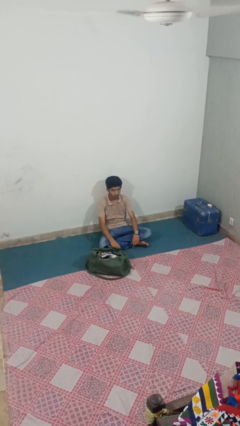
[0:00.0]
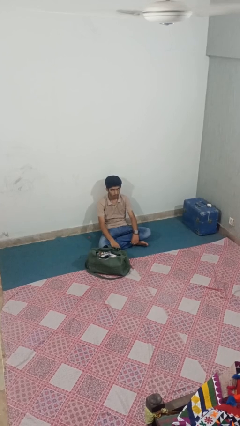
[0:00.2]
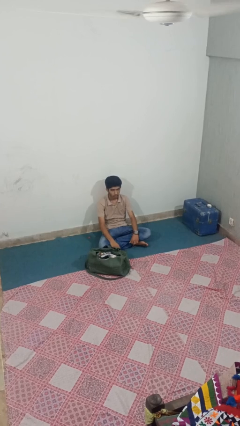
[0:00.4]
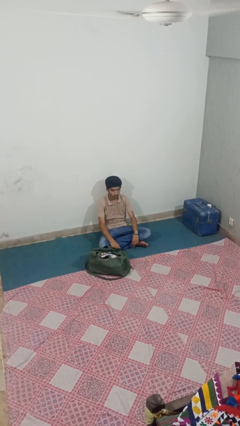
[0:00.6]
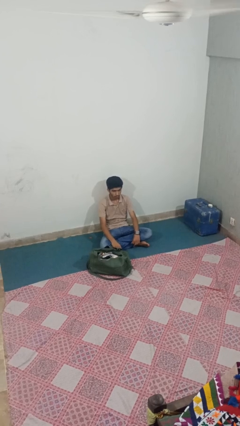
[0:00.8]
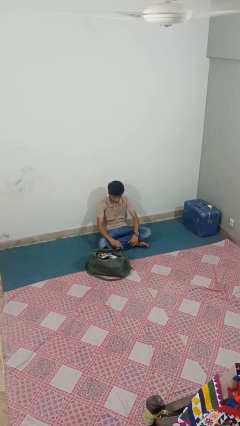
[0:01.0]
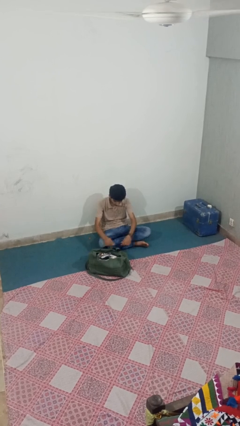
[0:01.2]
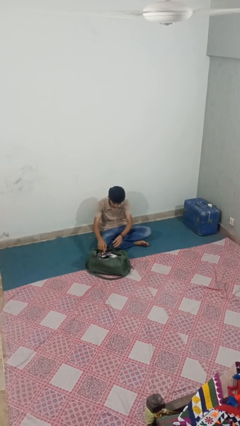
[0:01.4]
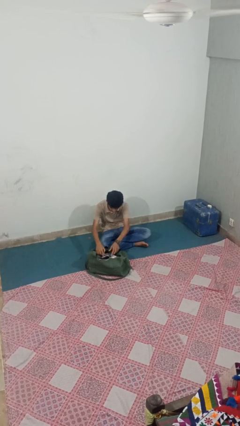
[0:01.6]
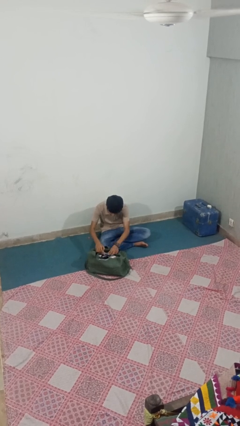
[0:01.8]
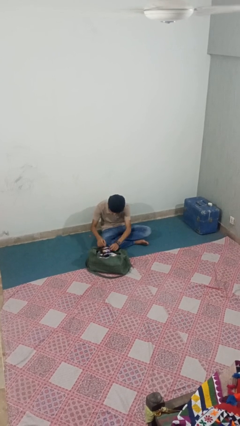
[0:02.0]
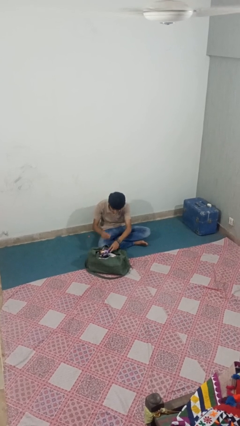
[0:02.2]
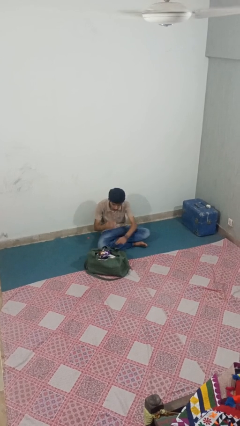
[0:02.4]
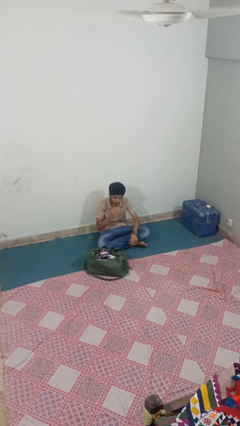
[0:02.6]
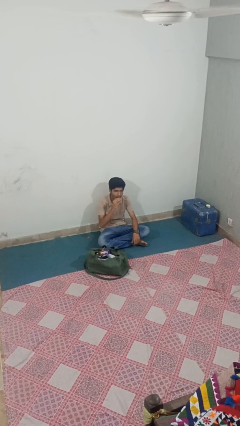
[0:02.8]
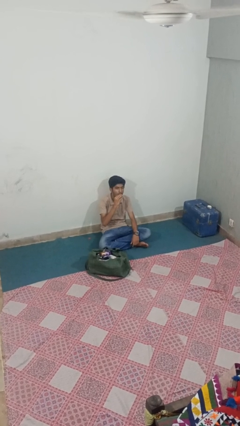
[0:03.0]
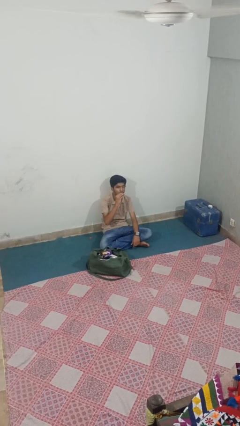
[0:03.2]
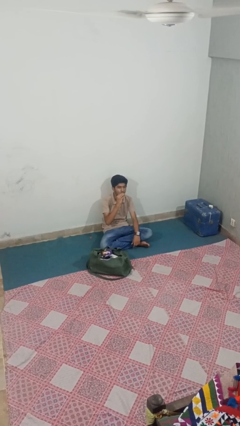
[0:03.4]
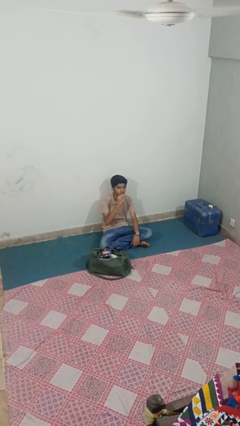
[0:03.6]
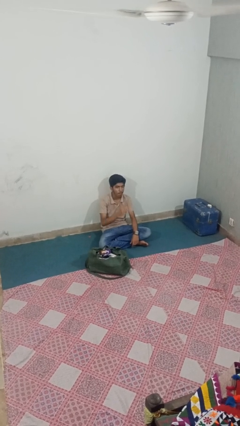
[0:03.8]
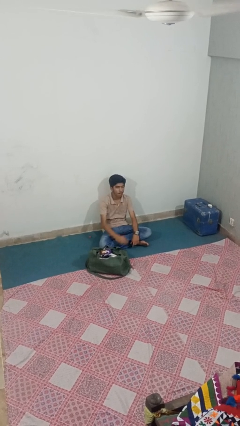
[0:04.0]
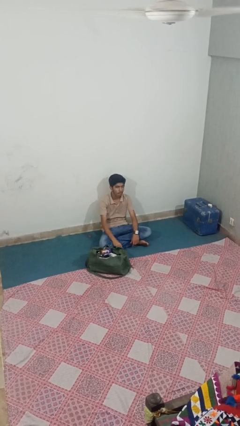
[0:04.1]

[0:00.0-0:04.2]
person eats snack from bag

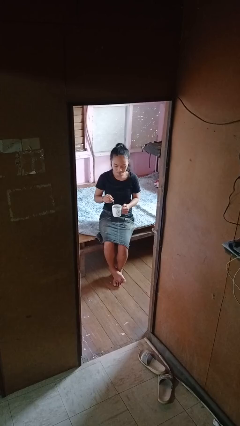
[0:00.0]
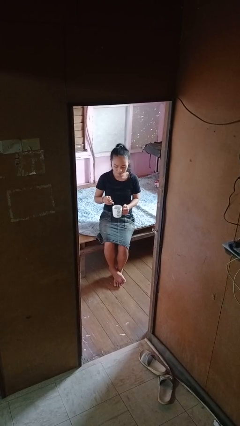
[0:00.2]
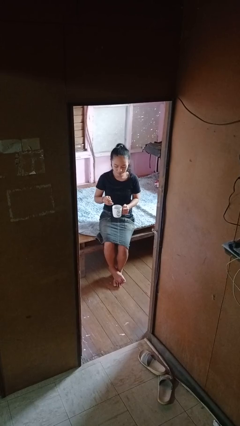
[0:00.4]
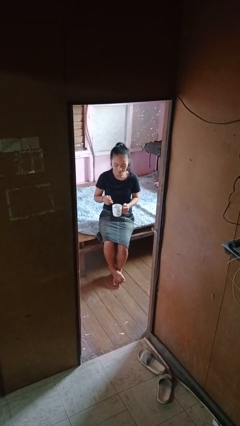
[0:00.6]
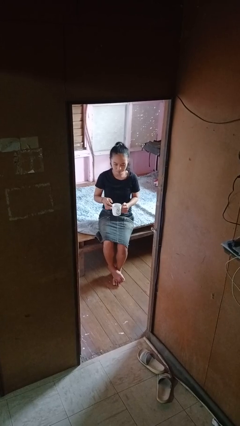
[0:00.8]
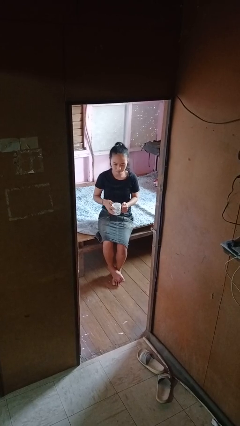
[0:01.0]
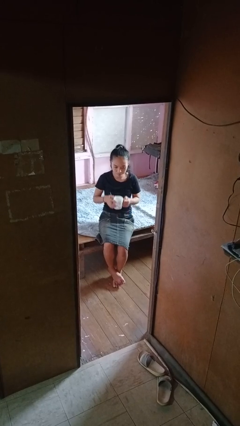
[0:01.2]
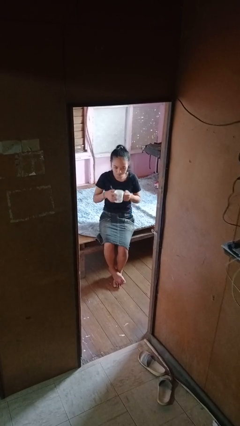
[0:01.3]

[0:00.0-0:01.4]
person stirs mug

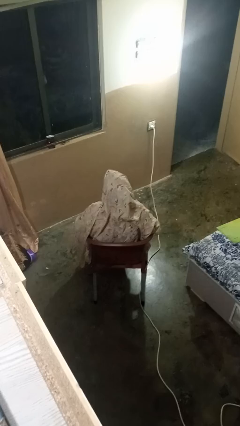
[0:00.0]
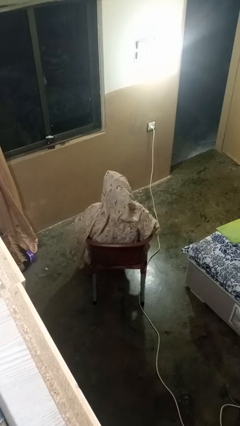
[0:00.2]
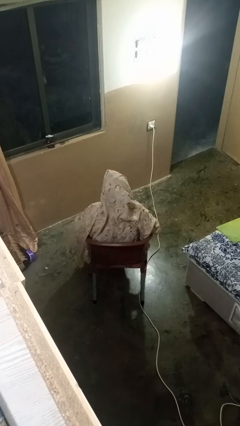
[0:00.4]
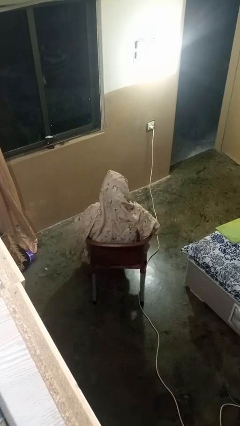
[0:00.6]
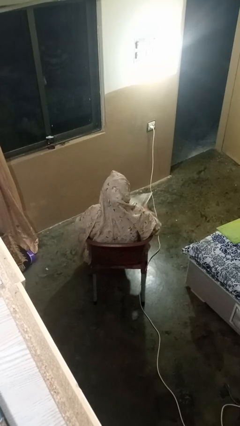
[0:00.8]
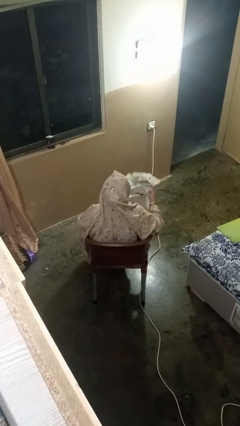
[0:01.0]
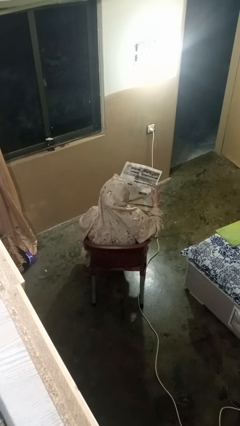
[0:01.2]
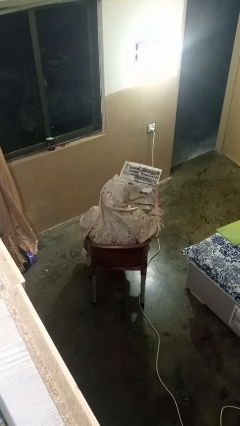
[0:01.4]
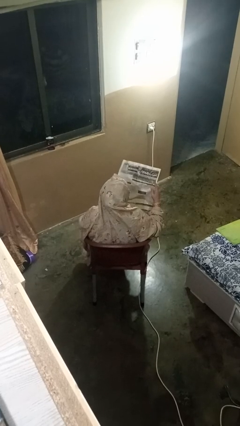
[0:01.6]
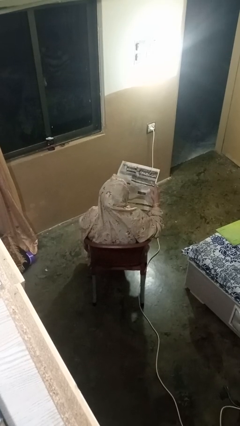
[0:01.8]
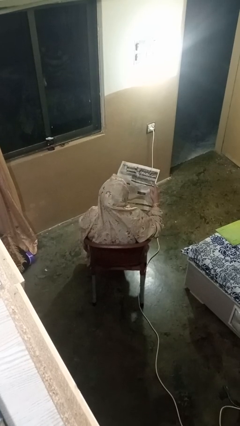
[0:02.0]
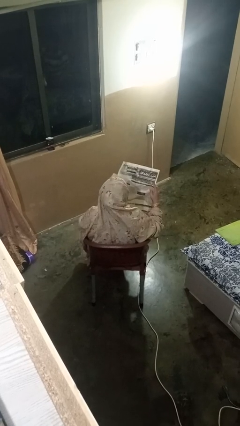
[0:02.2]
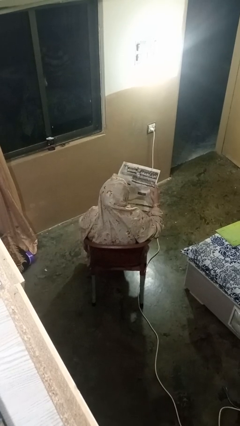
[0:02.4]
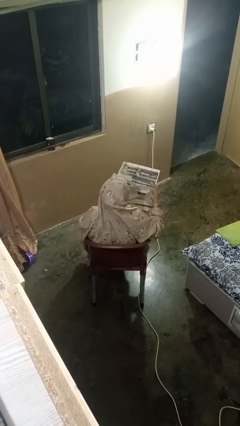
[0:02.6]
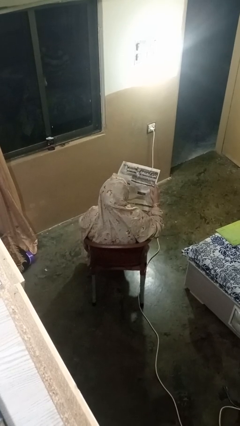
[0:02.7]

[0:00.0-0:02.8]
person reads newspaper

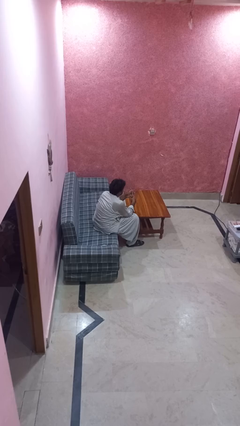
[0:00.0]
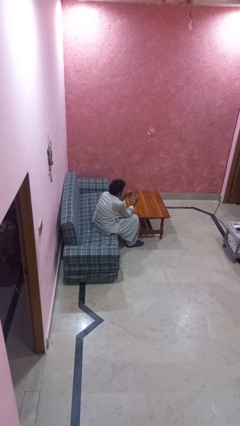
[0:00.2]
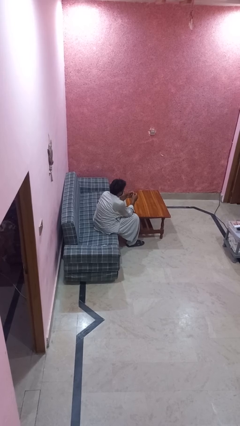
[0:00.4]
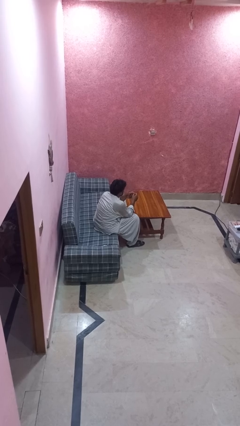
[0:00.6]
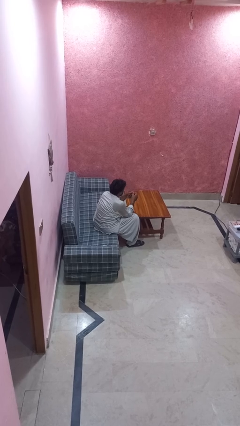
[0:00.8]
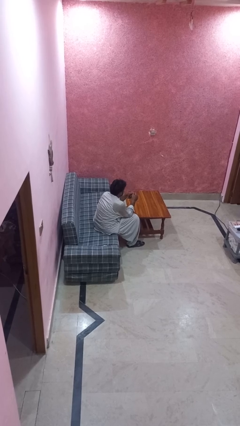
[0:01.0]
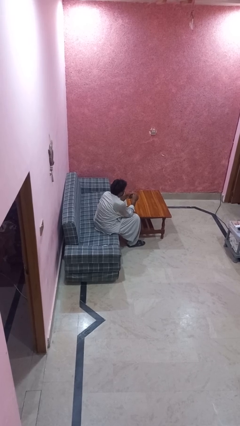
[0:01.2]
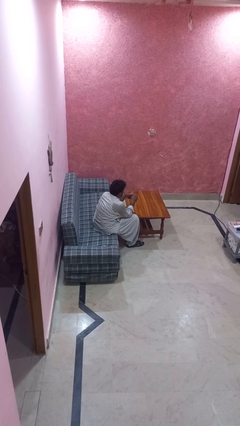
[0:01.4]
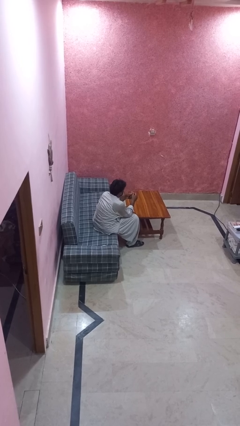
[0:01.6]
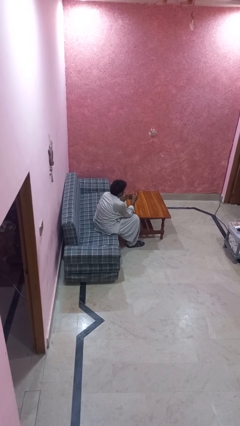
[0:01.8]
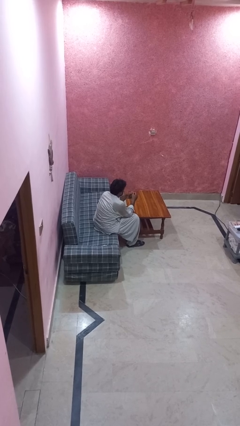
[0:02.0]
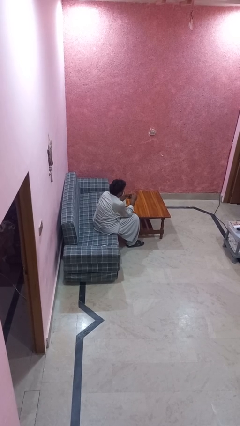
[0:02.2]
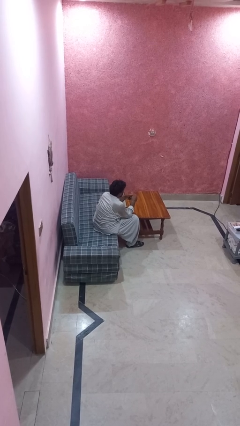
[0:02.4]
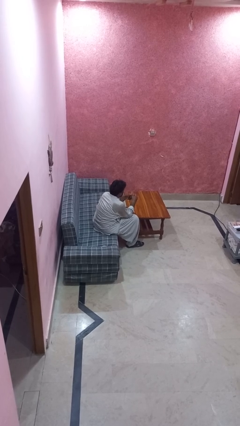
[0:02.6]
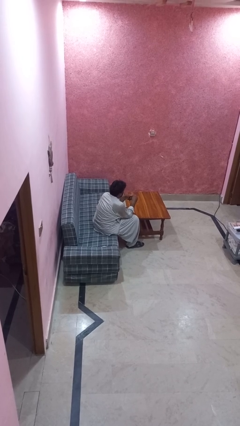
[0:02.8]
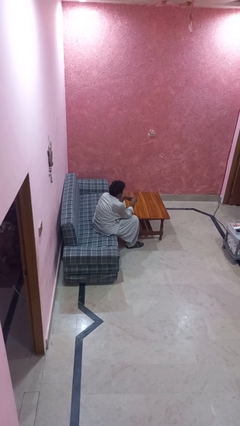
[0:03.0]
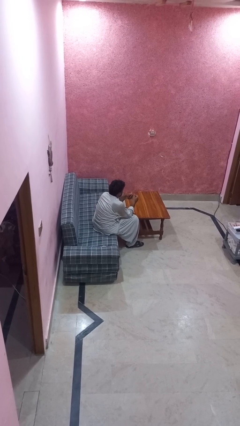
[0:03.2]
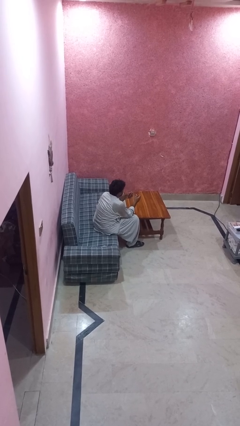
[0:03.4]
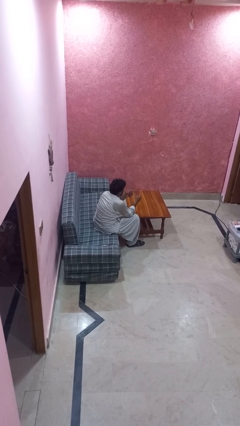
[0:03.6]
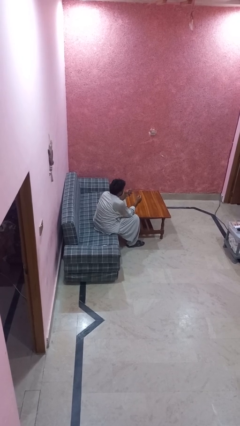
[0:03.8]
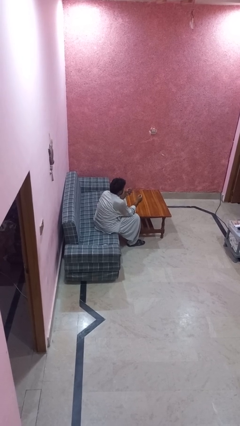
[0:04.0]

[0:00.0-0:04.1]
person files fingernails

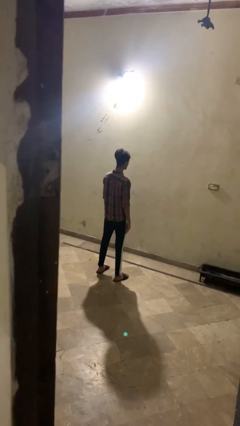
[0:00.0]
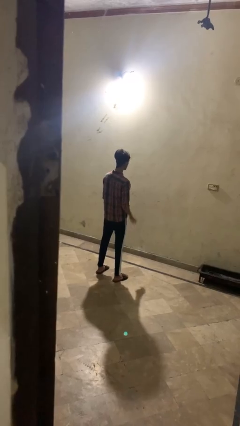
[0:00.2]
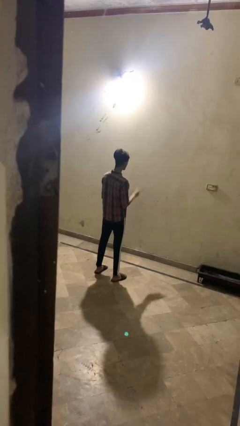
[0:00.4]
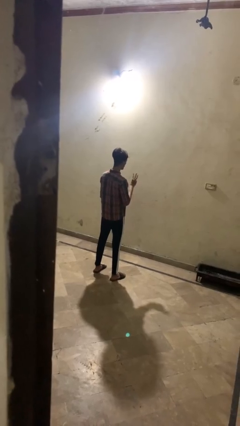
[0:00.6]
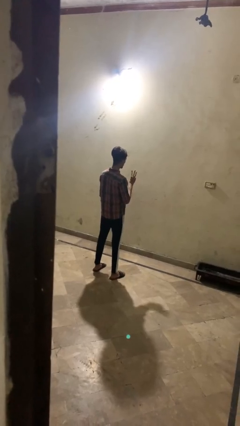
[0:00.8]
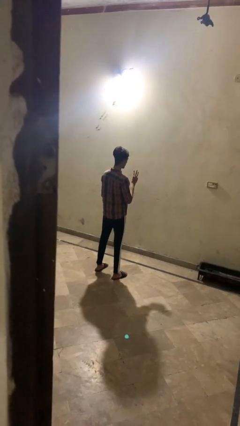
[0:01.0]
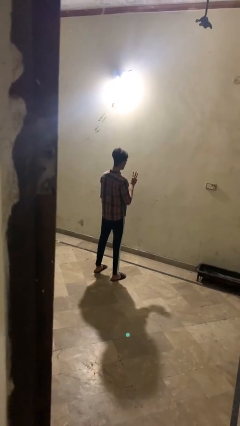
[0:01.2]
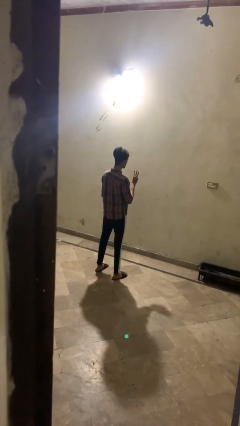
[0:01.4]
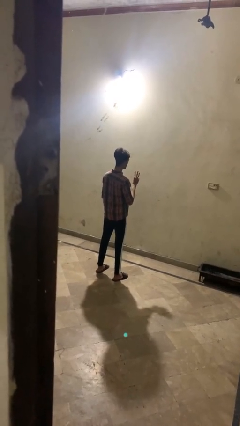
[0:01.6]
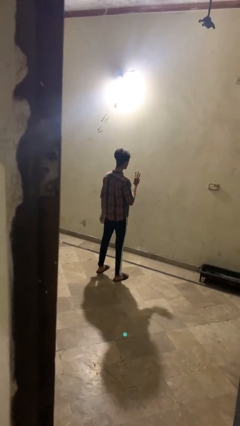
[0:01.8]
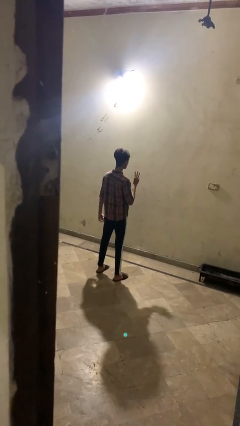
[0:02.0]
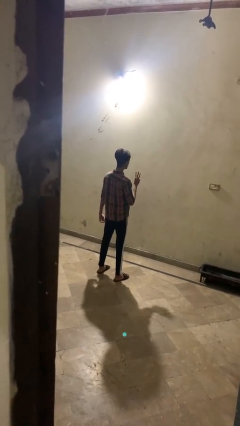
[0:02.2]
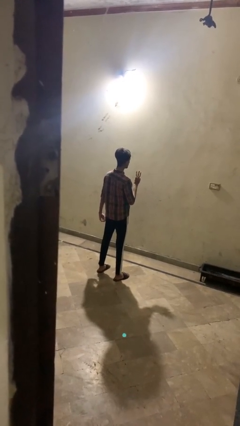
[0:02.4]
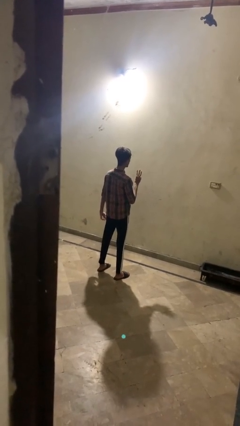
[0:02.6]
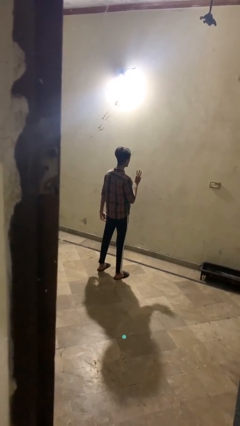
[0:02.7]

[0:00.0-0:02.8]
person gestures number three

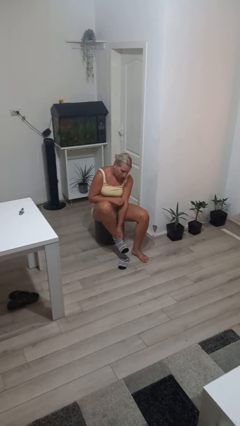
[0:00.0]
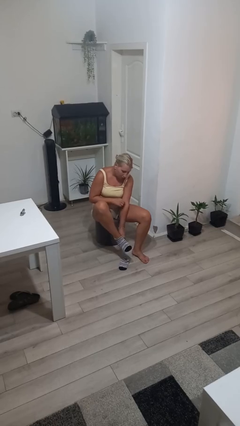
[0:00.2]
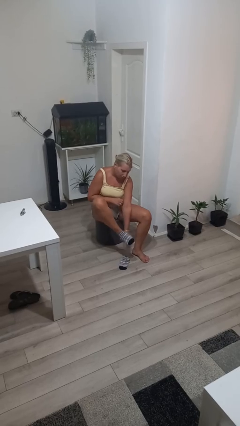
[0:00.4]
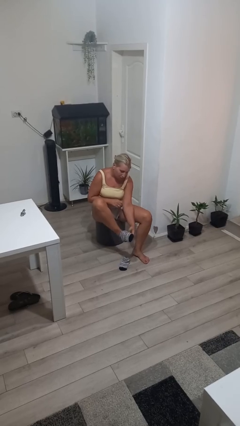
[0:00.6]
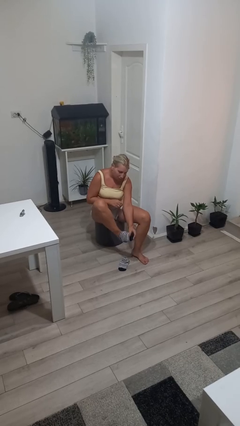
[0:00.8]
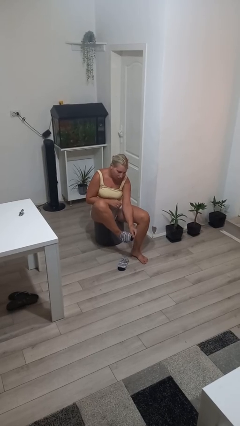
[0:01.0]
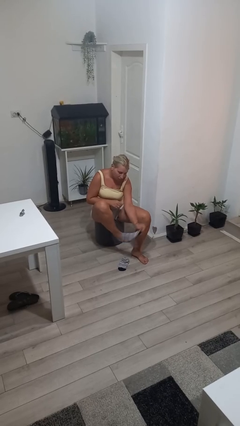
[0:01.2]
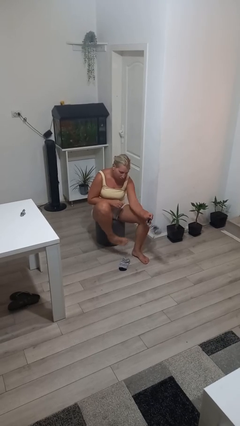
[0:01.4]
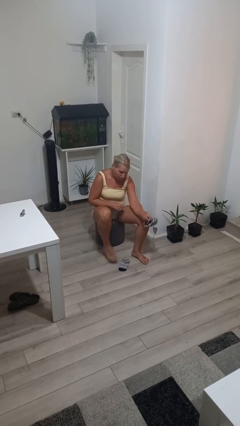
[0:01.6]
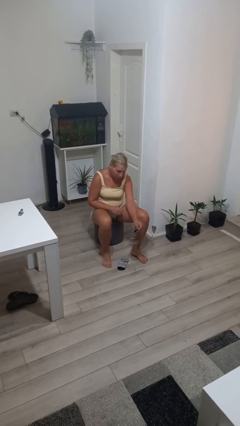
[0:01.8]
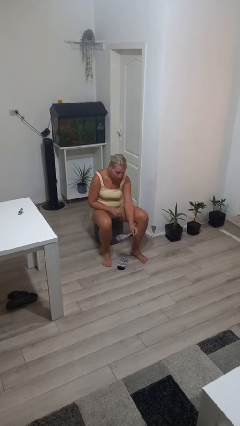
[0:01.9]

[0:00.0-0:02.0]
person takes off socks
